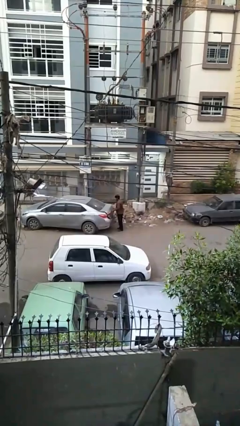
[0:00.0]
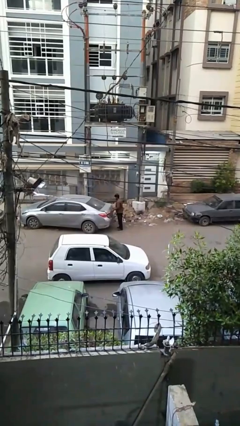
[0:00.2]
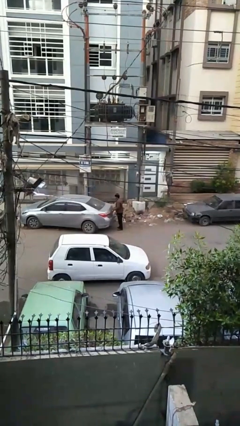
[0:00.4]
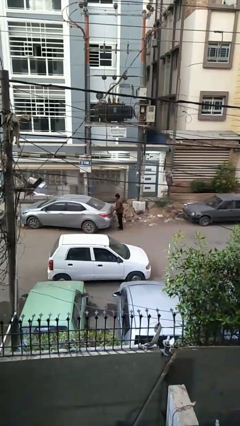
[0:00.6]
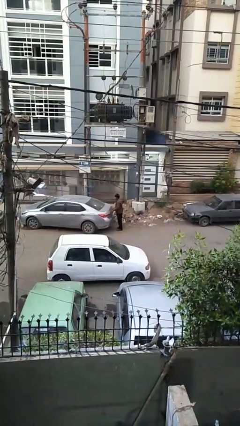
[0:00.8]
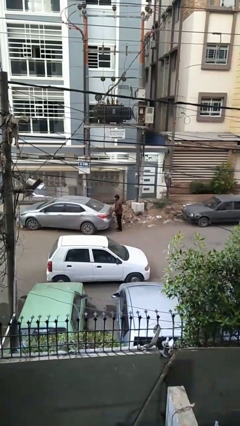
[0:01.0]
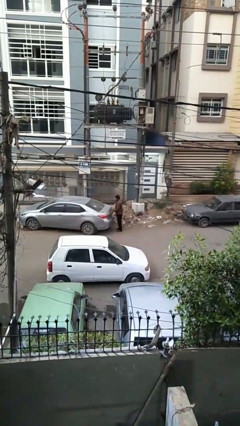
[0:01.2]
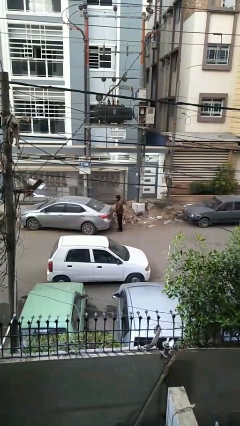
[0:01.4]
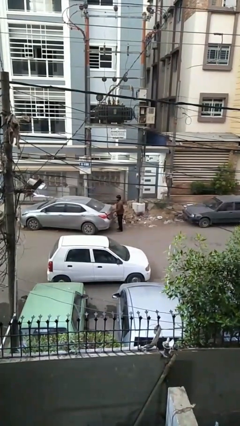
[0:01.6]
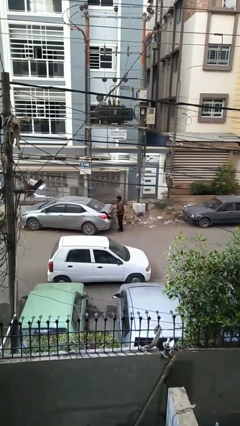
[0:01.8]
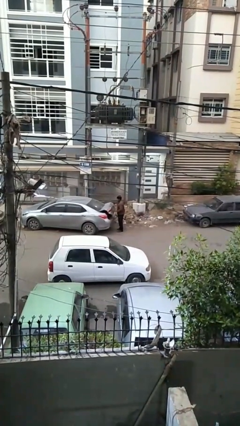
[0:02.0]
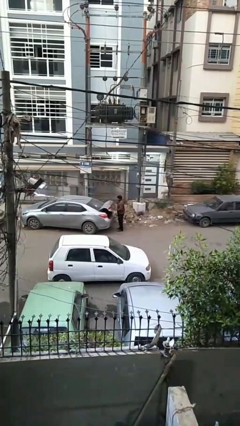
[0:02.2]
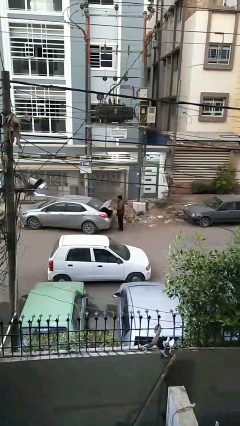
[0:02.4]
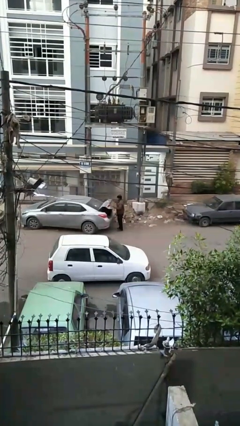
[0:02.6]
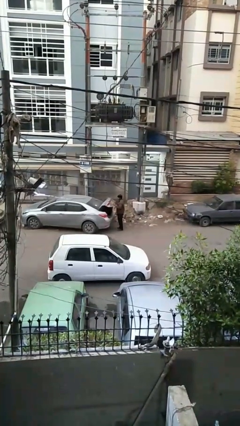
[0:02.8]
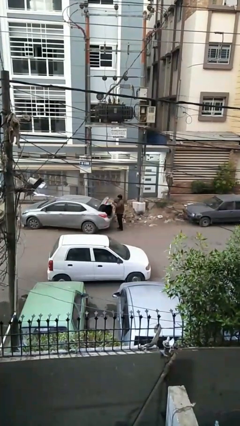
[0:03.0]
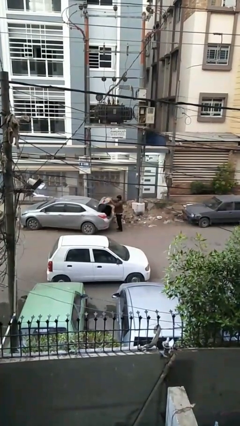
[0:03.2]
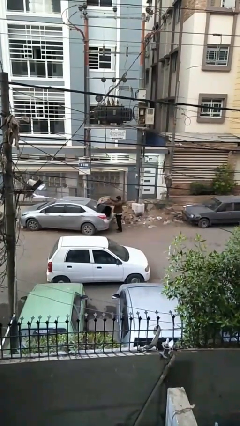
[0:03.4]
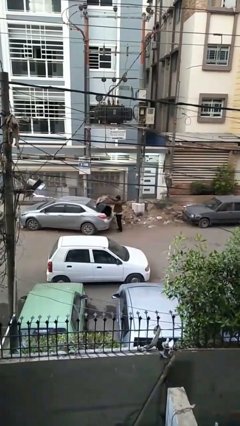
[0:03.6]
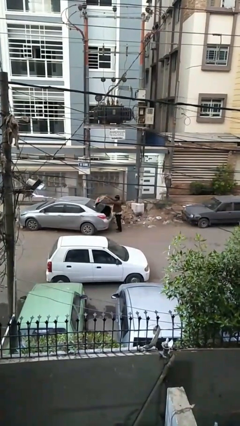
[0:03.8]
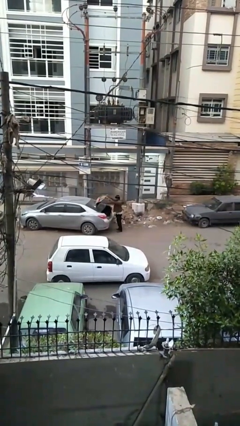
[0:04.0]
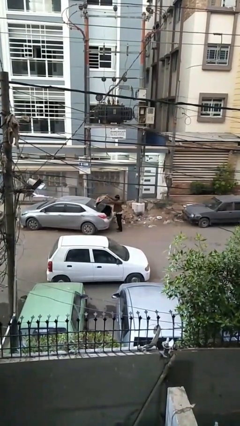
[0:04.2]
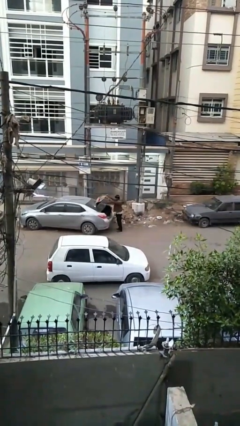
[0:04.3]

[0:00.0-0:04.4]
person opens car trunk

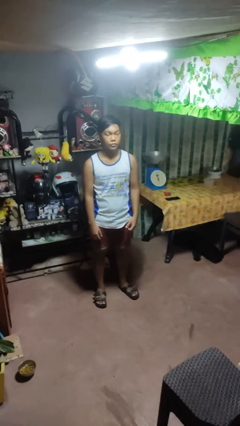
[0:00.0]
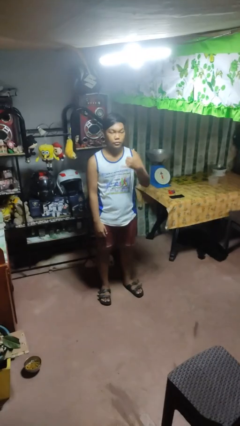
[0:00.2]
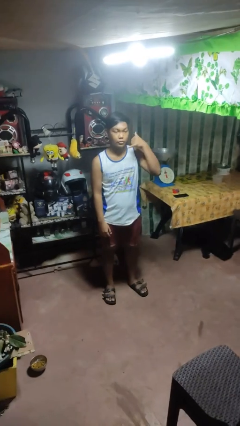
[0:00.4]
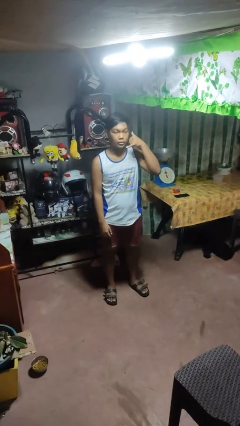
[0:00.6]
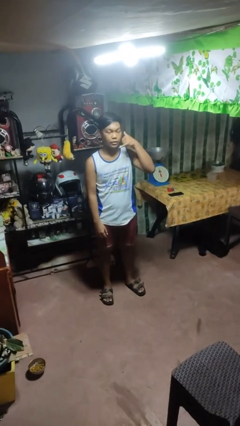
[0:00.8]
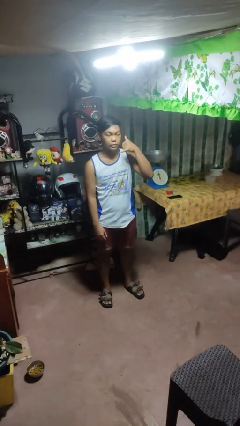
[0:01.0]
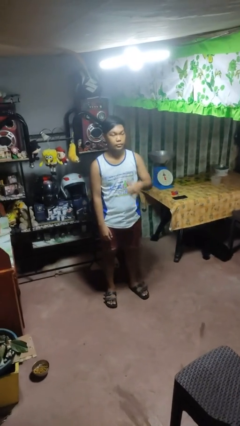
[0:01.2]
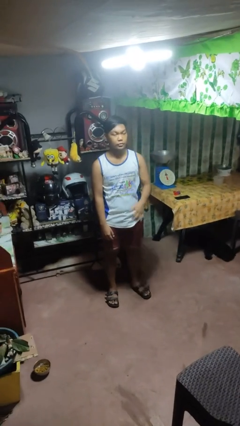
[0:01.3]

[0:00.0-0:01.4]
person gestures call me

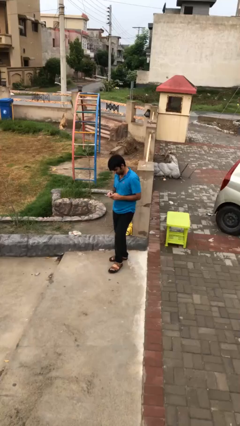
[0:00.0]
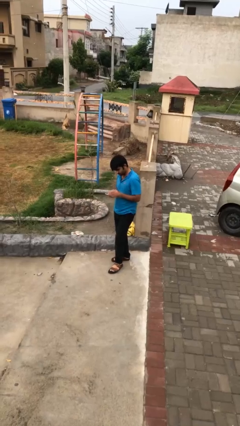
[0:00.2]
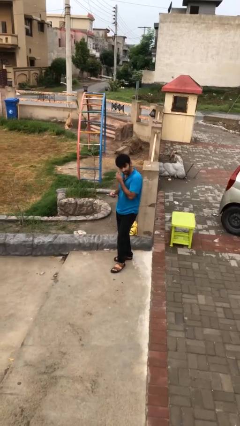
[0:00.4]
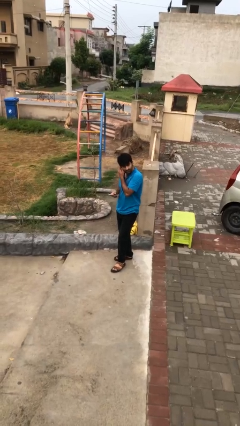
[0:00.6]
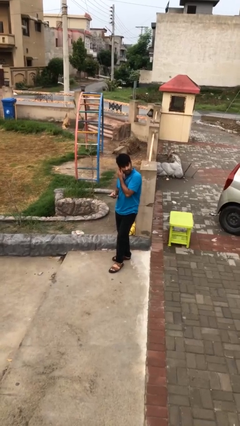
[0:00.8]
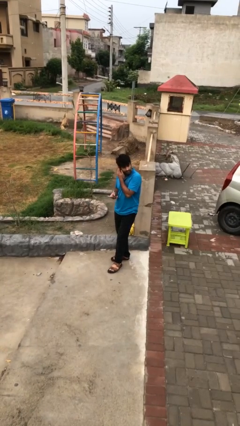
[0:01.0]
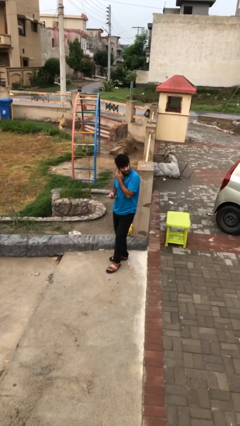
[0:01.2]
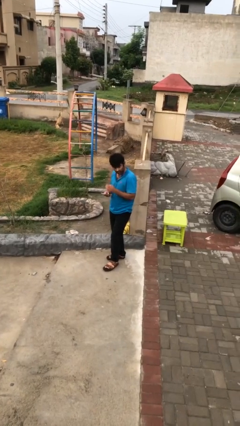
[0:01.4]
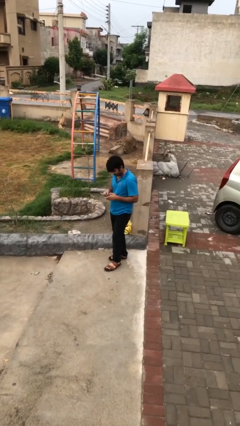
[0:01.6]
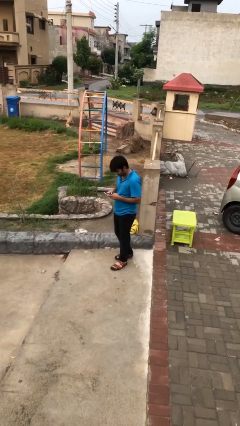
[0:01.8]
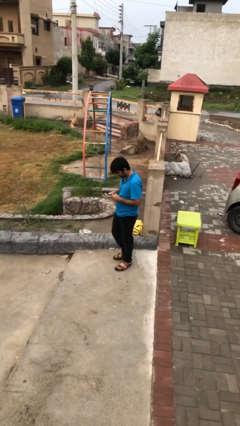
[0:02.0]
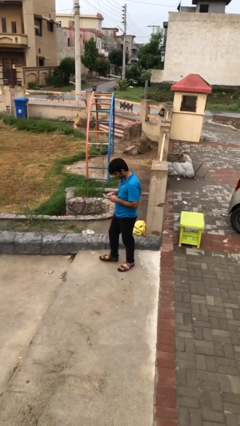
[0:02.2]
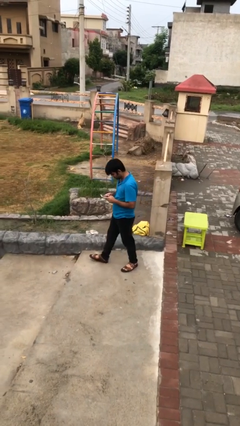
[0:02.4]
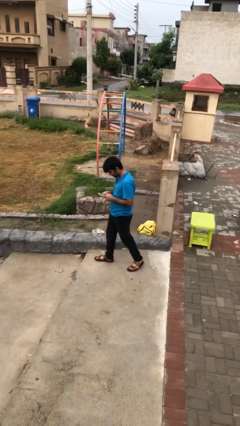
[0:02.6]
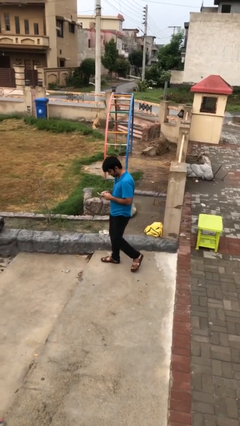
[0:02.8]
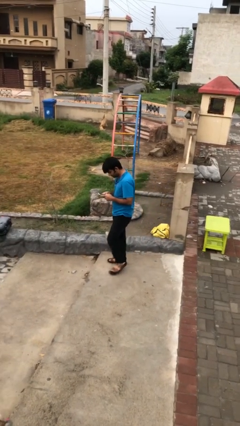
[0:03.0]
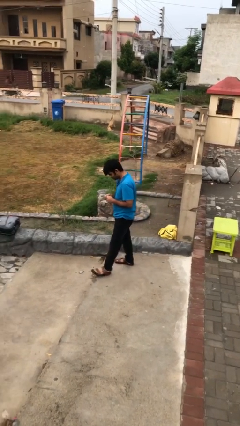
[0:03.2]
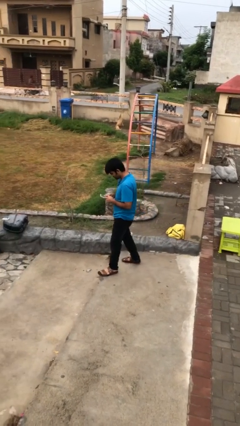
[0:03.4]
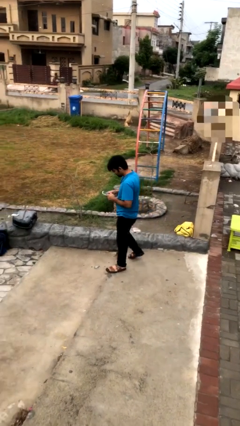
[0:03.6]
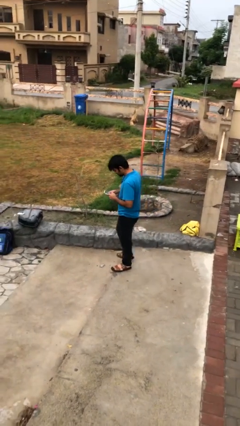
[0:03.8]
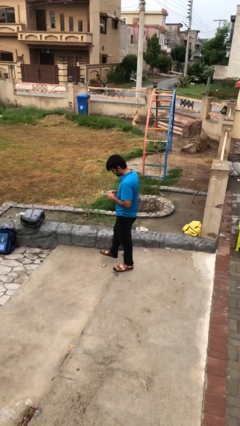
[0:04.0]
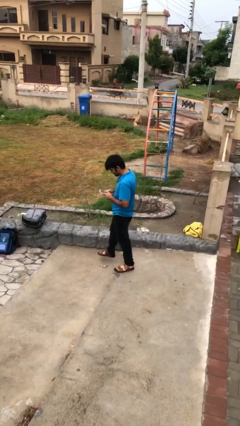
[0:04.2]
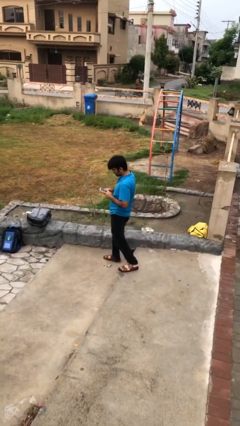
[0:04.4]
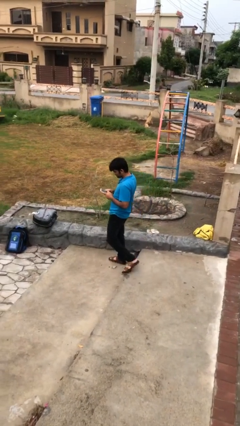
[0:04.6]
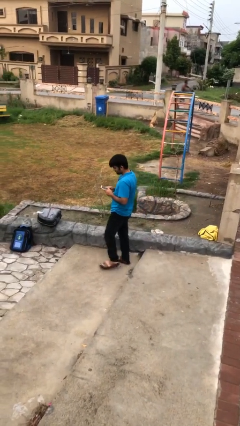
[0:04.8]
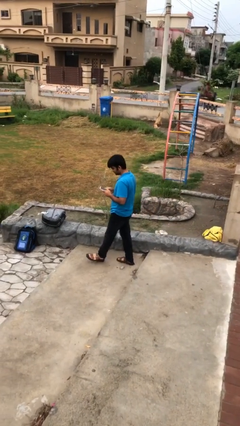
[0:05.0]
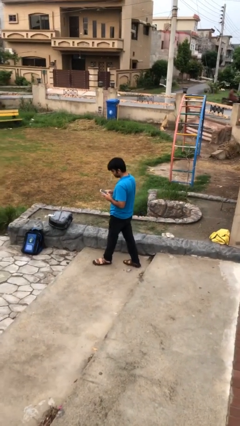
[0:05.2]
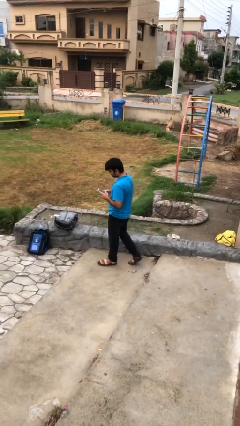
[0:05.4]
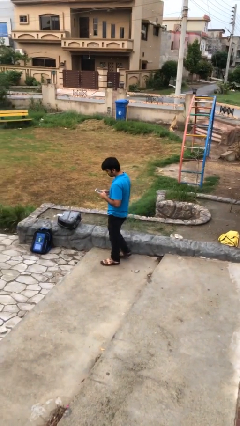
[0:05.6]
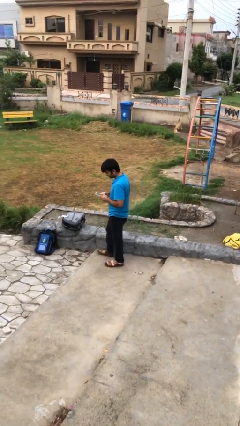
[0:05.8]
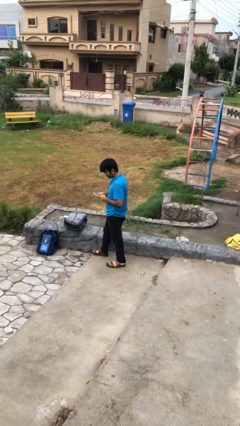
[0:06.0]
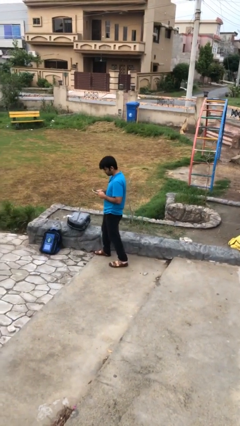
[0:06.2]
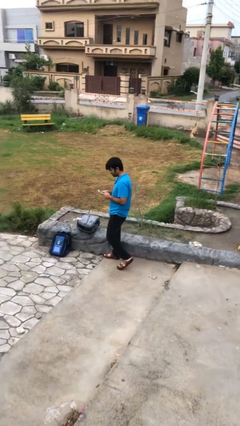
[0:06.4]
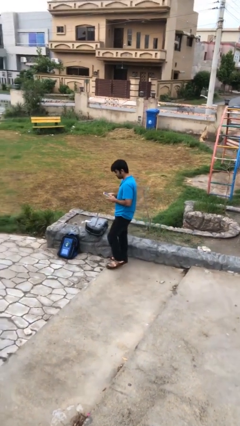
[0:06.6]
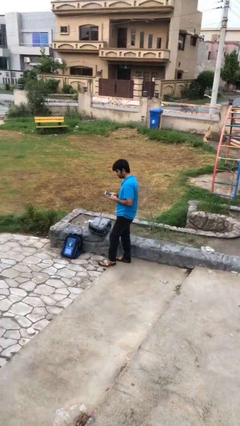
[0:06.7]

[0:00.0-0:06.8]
person texts on phone

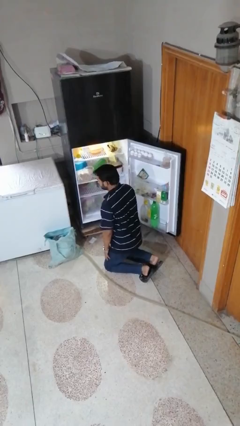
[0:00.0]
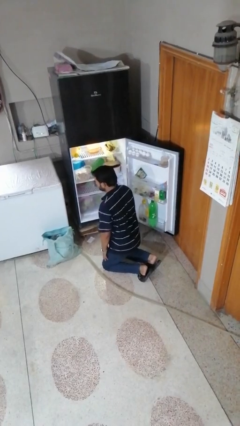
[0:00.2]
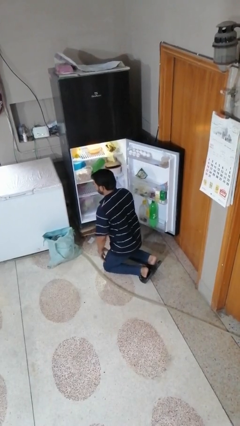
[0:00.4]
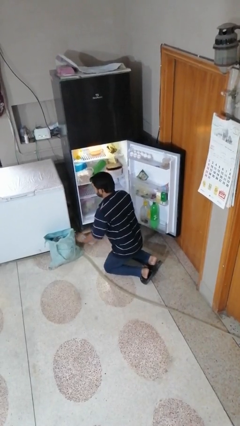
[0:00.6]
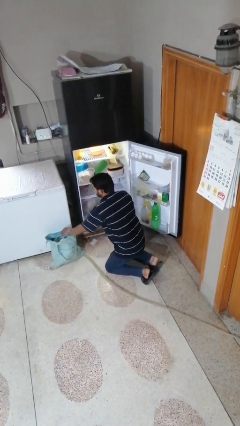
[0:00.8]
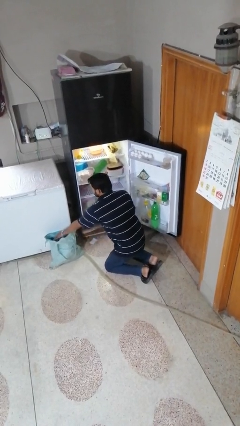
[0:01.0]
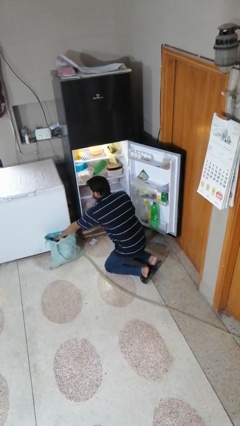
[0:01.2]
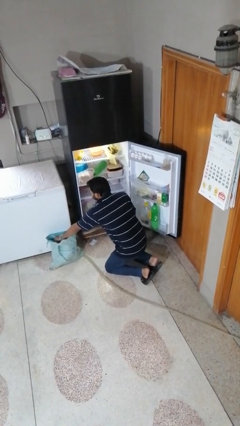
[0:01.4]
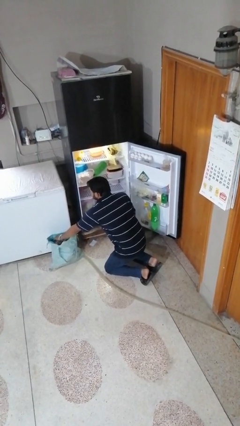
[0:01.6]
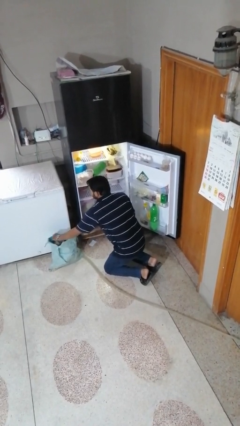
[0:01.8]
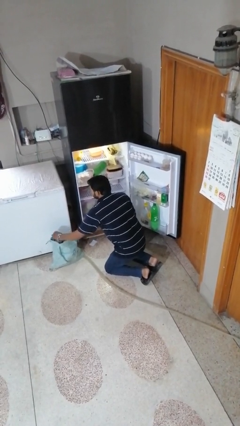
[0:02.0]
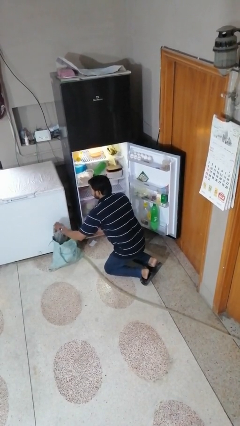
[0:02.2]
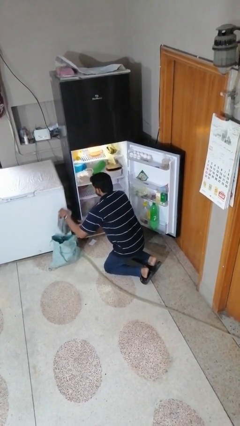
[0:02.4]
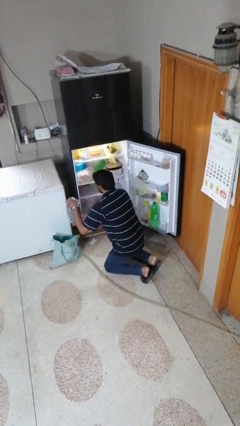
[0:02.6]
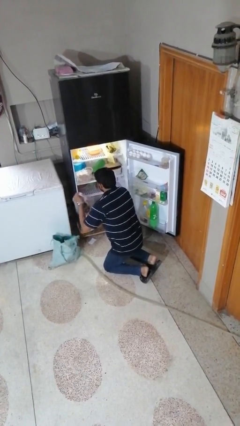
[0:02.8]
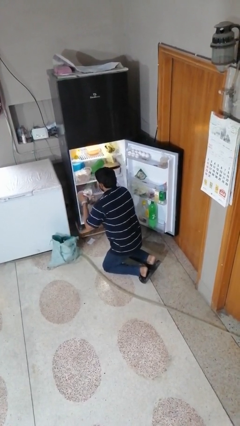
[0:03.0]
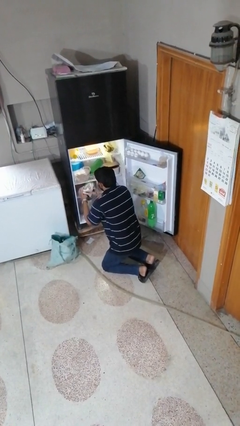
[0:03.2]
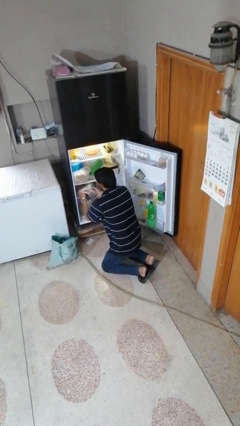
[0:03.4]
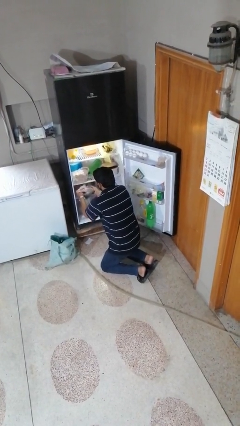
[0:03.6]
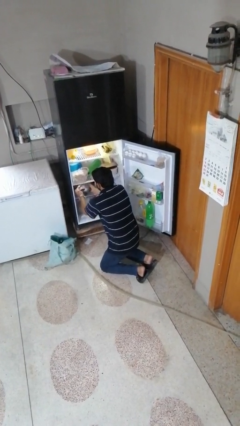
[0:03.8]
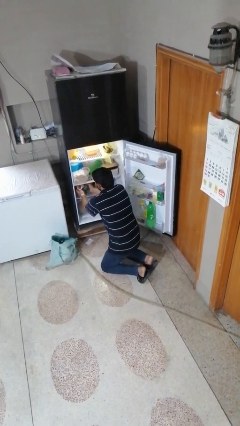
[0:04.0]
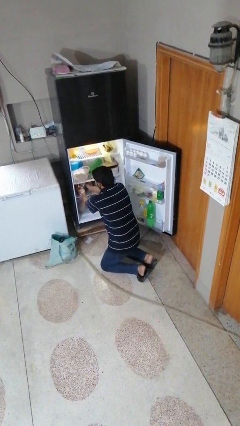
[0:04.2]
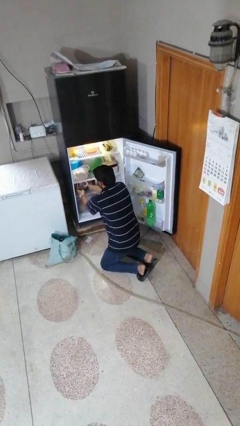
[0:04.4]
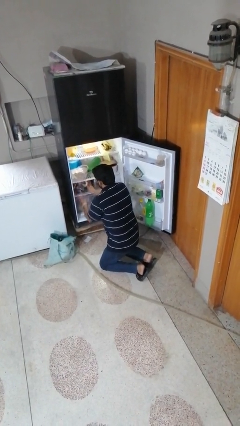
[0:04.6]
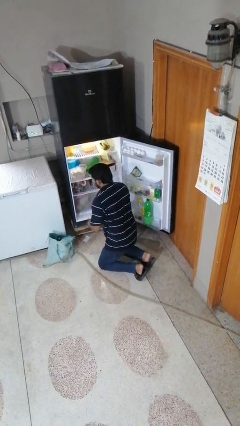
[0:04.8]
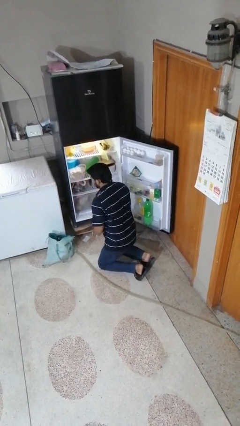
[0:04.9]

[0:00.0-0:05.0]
person loads groceries into refrigerator

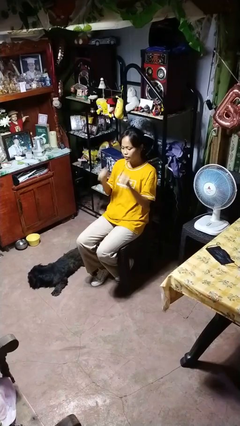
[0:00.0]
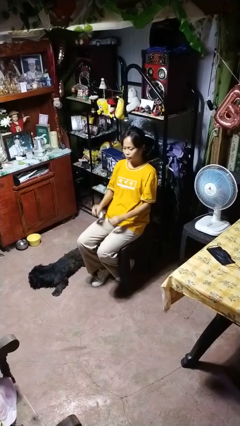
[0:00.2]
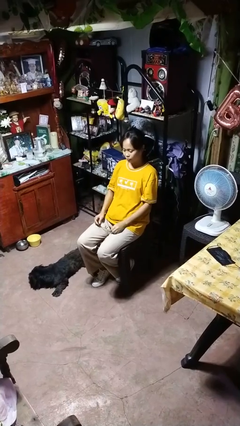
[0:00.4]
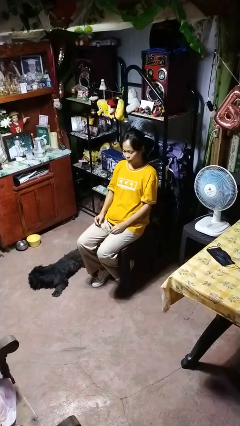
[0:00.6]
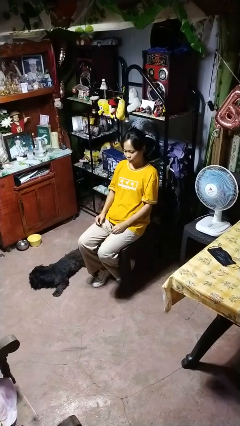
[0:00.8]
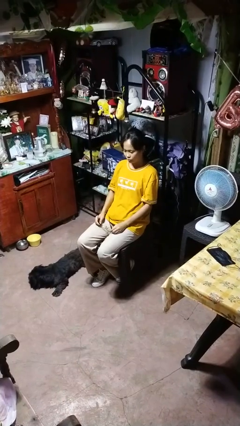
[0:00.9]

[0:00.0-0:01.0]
person takes off glasses
